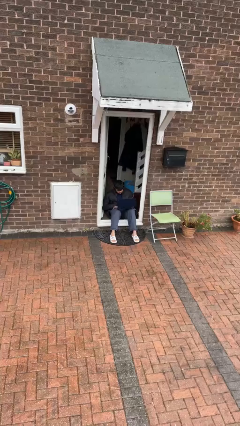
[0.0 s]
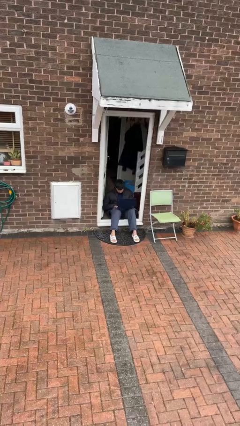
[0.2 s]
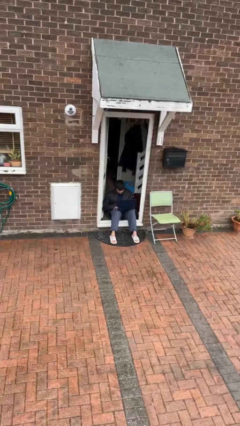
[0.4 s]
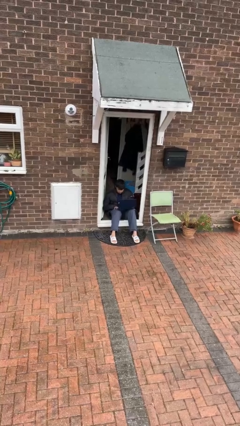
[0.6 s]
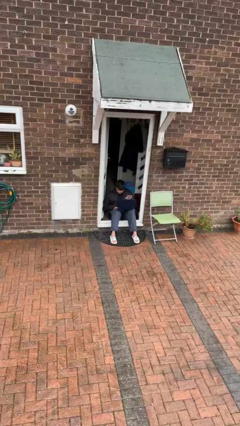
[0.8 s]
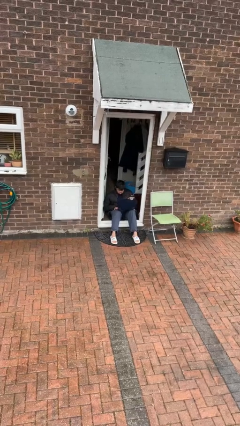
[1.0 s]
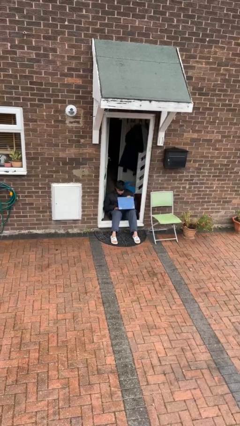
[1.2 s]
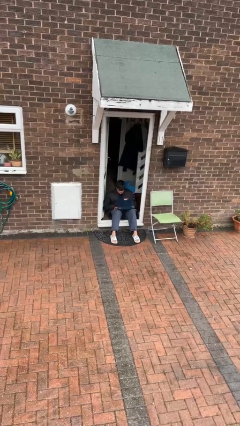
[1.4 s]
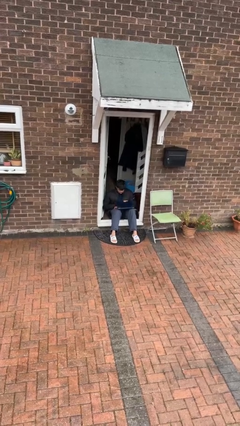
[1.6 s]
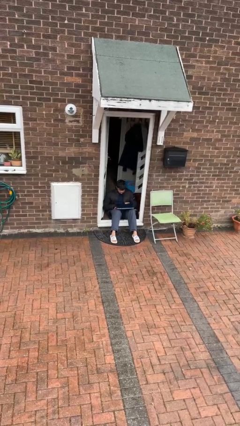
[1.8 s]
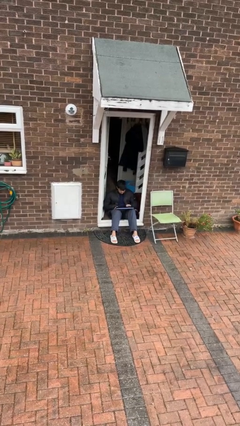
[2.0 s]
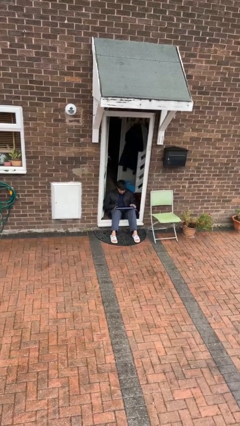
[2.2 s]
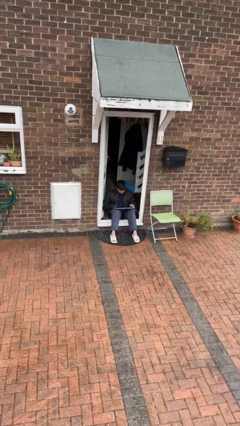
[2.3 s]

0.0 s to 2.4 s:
person closes laptop

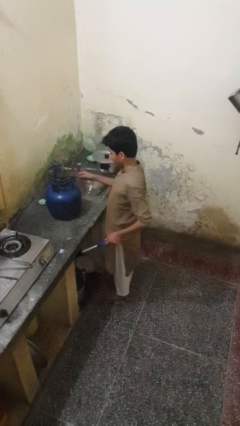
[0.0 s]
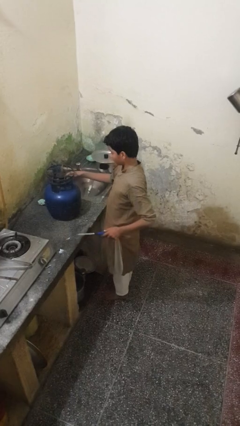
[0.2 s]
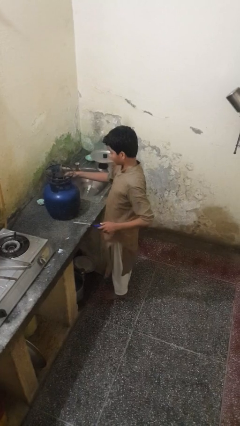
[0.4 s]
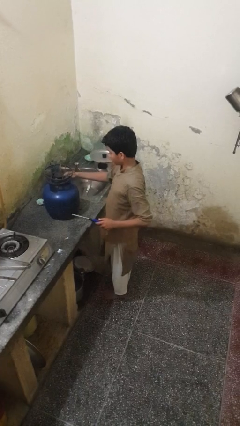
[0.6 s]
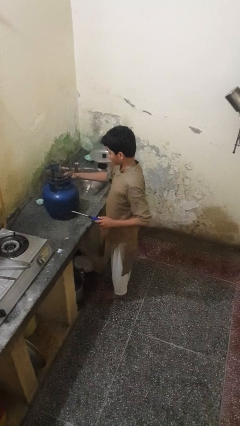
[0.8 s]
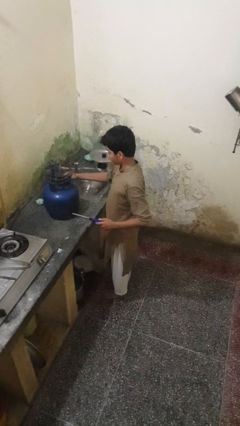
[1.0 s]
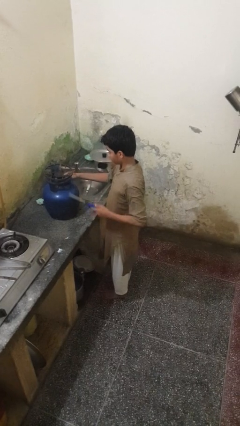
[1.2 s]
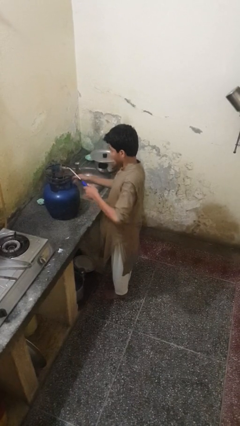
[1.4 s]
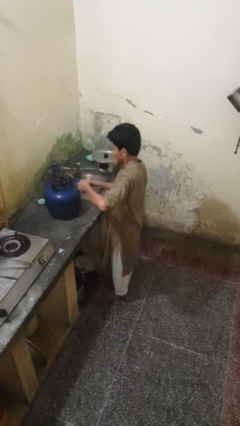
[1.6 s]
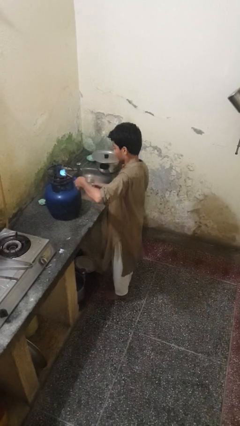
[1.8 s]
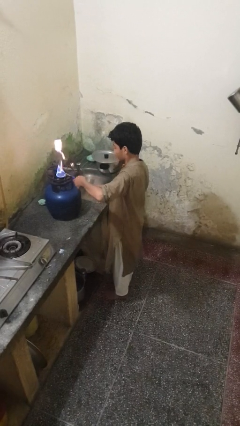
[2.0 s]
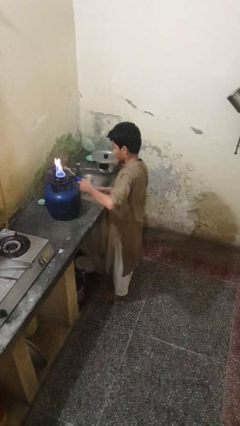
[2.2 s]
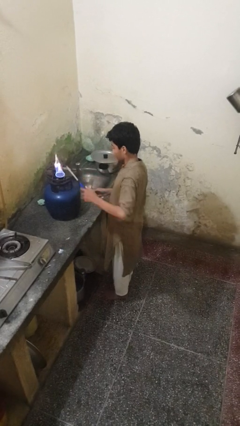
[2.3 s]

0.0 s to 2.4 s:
person turns on stovetop

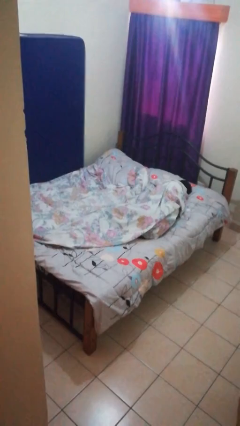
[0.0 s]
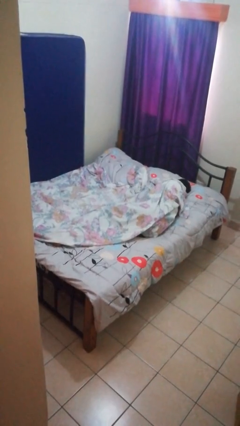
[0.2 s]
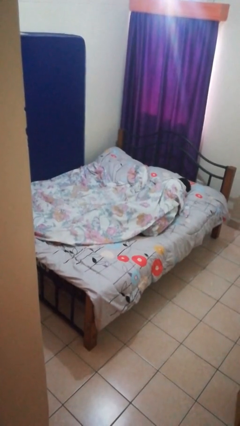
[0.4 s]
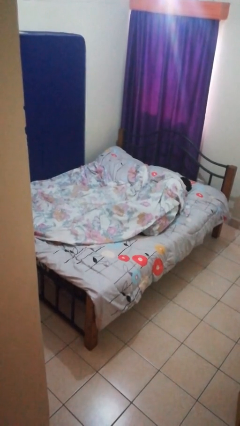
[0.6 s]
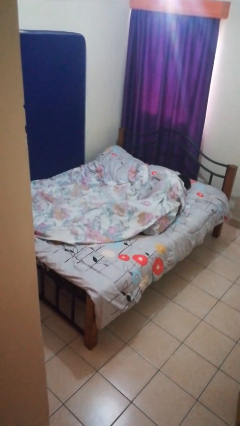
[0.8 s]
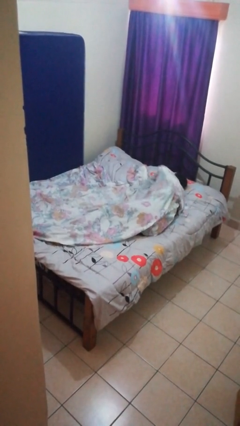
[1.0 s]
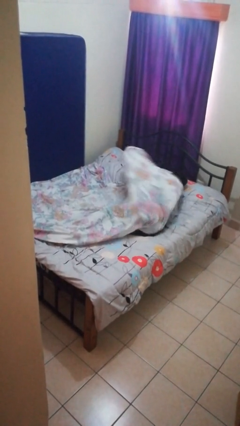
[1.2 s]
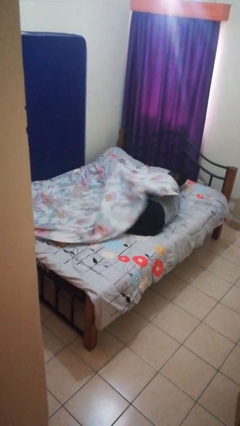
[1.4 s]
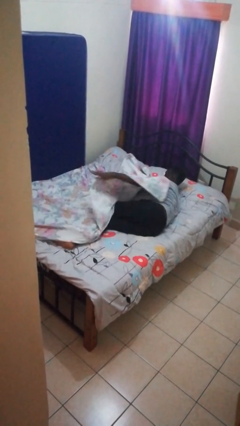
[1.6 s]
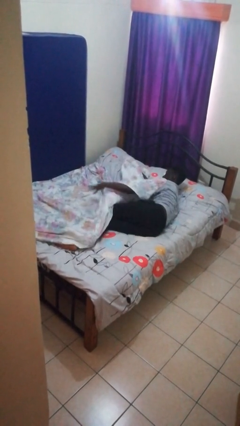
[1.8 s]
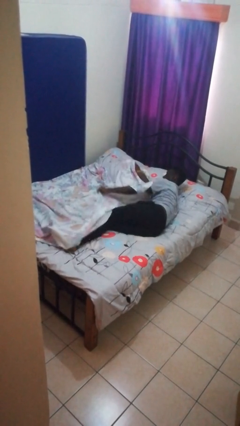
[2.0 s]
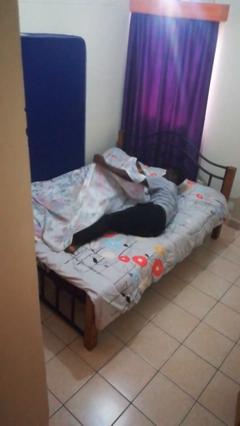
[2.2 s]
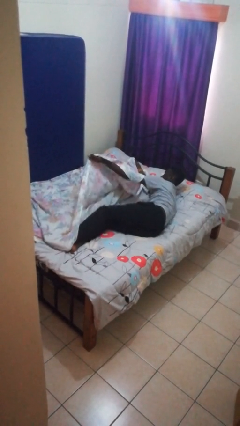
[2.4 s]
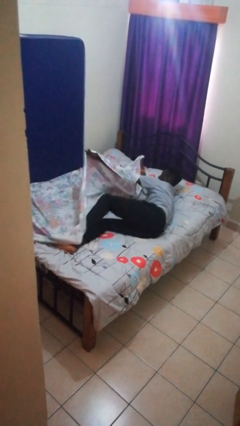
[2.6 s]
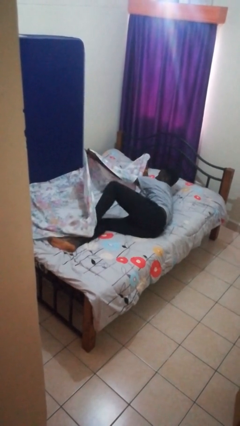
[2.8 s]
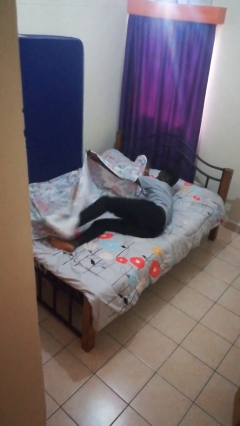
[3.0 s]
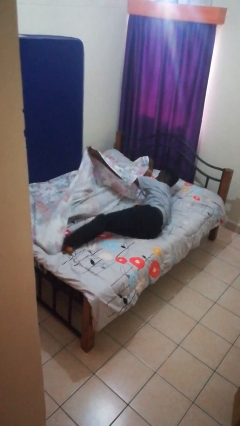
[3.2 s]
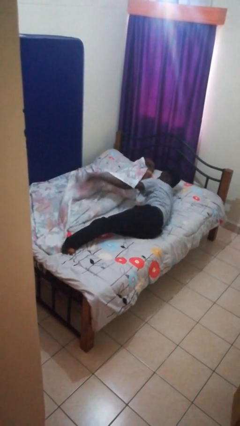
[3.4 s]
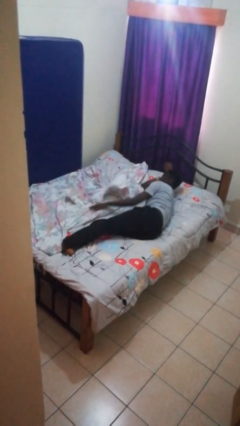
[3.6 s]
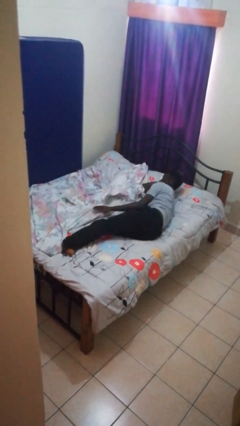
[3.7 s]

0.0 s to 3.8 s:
person uncovers with bedsheets

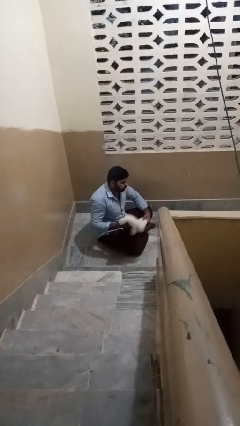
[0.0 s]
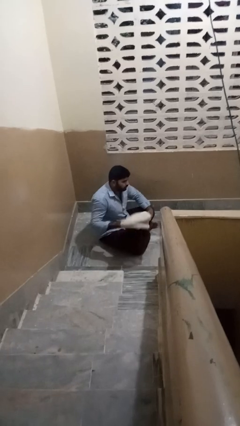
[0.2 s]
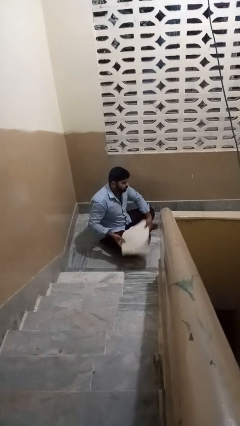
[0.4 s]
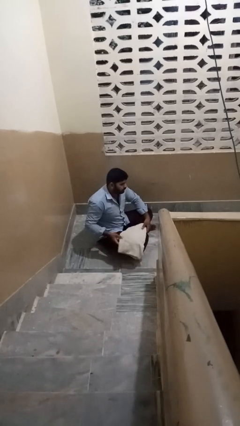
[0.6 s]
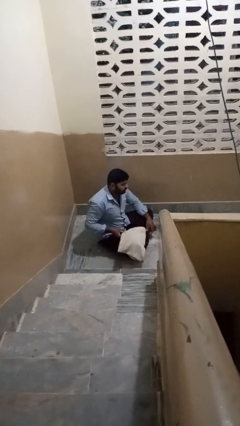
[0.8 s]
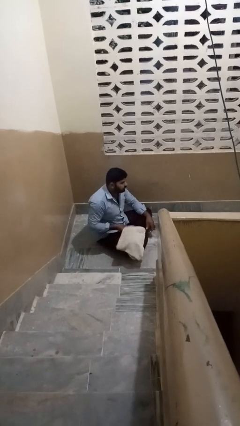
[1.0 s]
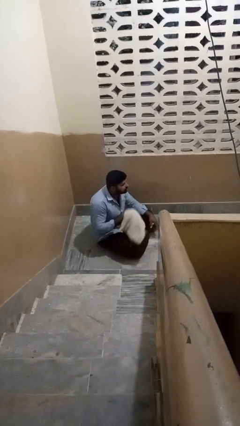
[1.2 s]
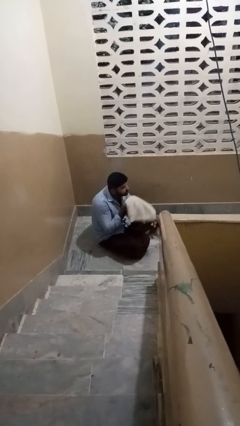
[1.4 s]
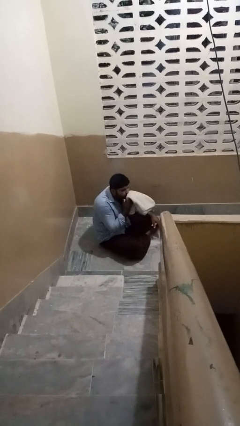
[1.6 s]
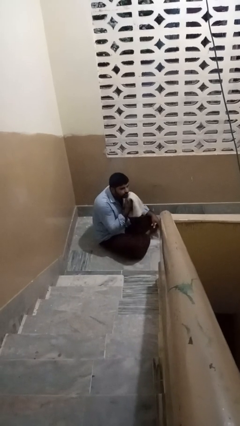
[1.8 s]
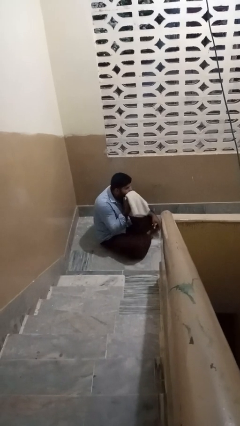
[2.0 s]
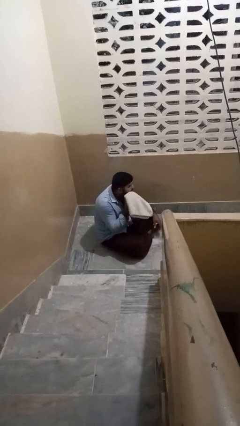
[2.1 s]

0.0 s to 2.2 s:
person wipes mouth with napkin

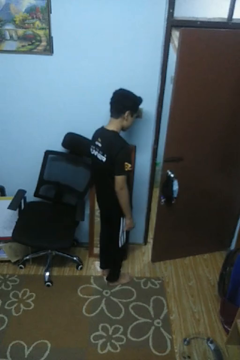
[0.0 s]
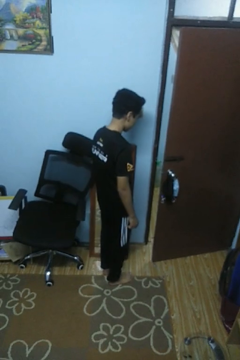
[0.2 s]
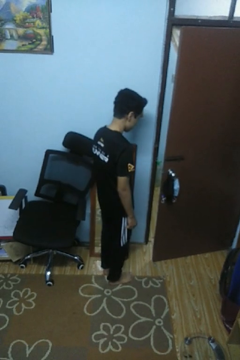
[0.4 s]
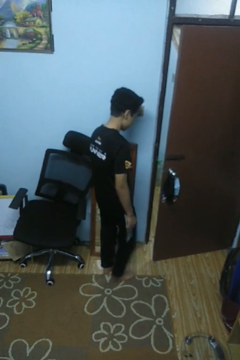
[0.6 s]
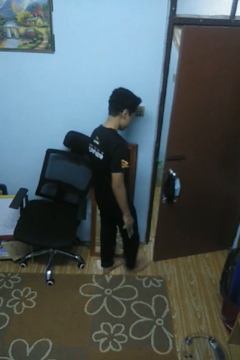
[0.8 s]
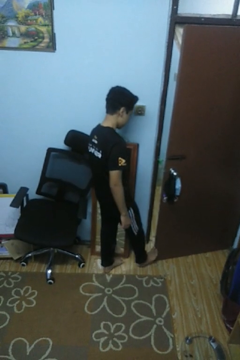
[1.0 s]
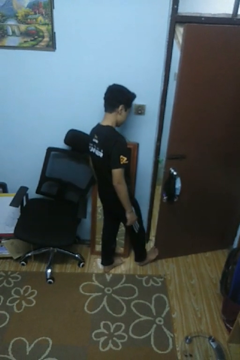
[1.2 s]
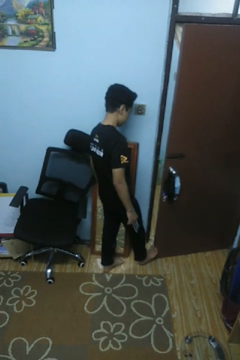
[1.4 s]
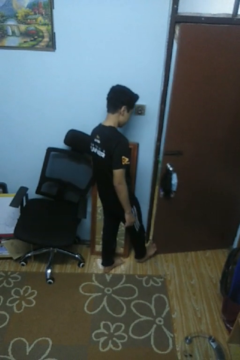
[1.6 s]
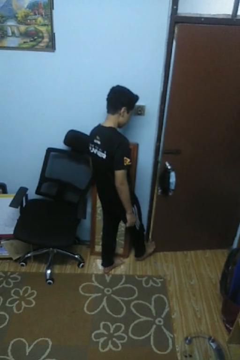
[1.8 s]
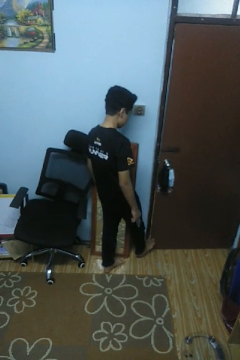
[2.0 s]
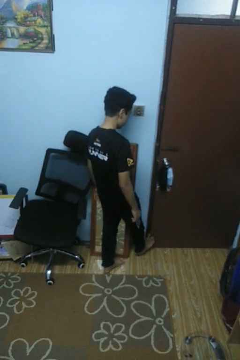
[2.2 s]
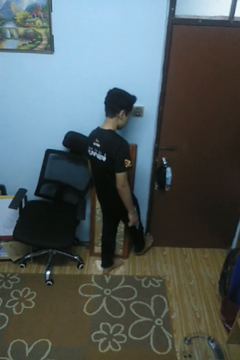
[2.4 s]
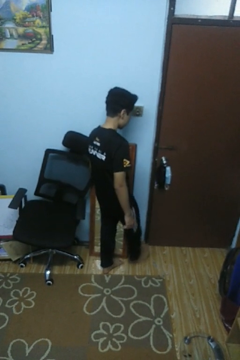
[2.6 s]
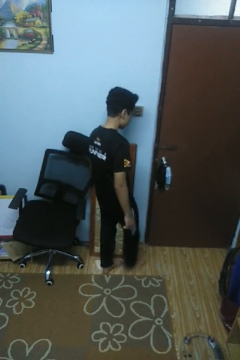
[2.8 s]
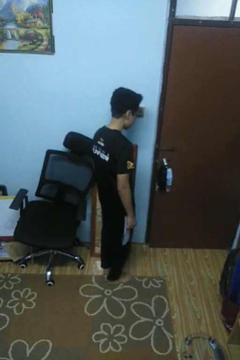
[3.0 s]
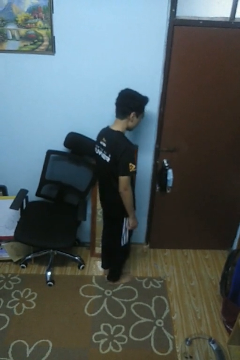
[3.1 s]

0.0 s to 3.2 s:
person closes door with foot

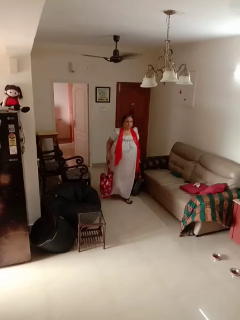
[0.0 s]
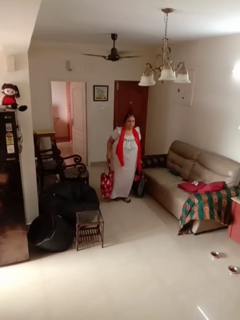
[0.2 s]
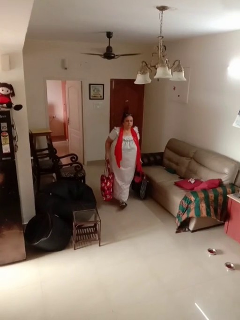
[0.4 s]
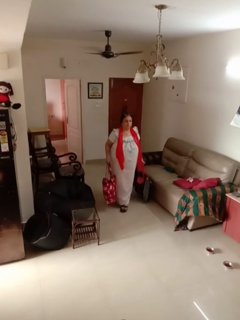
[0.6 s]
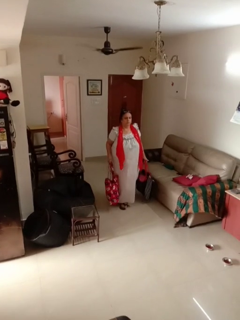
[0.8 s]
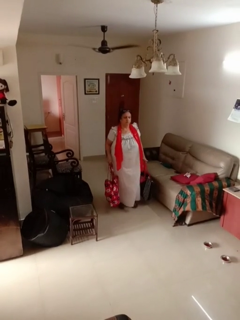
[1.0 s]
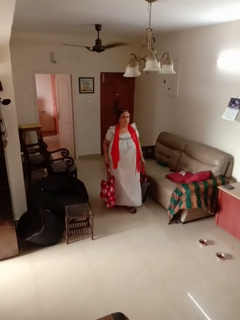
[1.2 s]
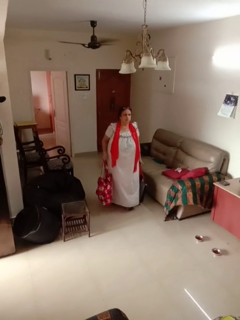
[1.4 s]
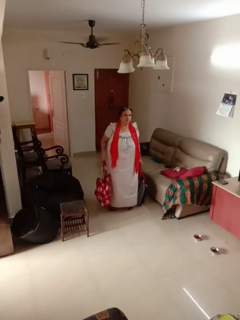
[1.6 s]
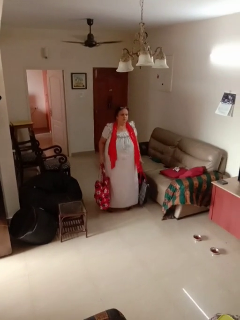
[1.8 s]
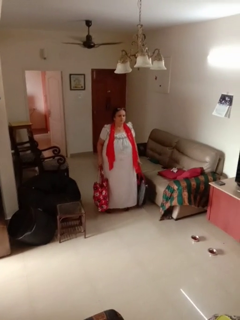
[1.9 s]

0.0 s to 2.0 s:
person carries groceries

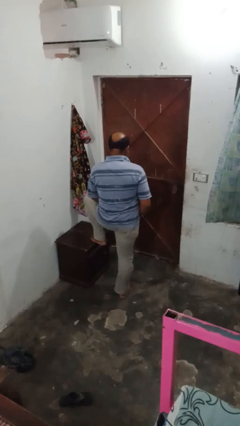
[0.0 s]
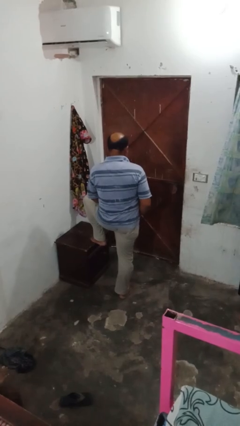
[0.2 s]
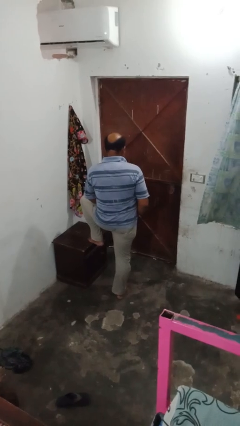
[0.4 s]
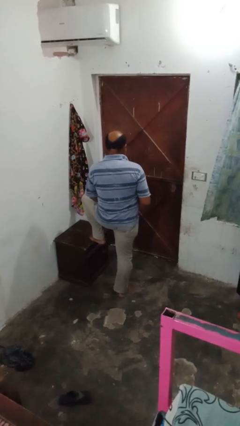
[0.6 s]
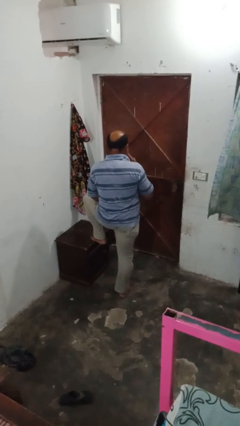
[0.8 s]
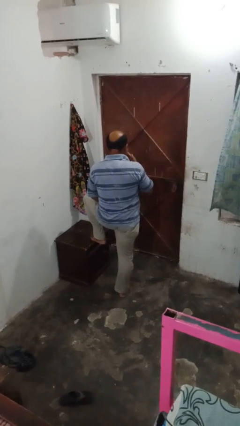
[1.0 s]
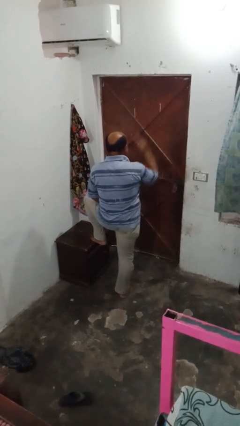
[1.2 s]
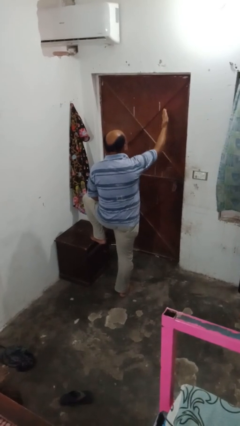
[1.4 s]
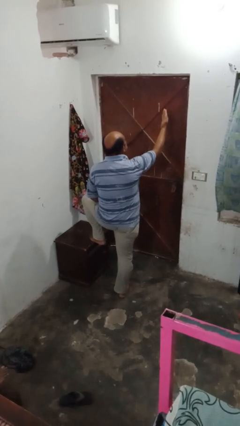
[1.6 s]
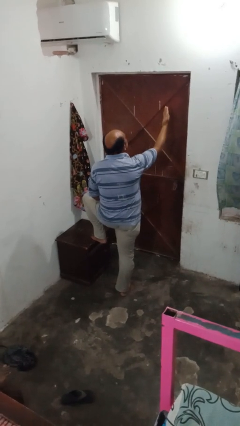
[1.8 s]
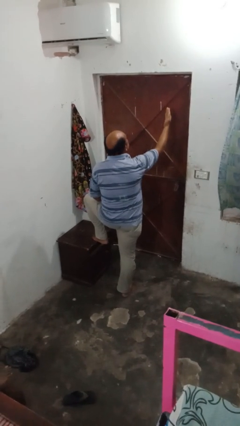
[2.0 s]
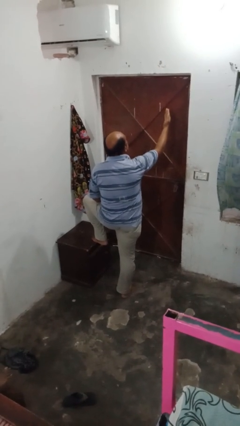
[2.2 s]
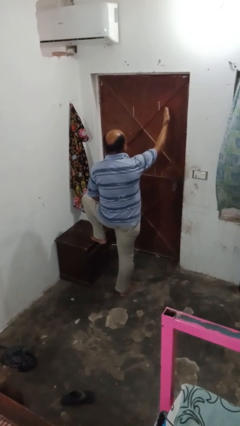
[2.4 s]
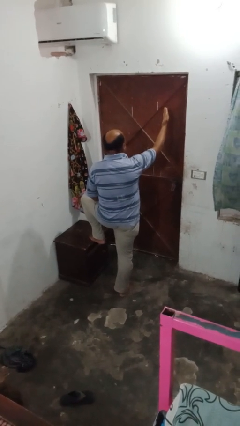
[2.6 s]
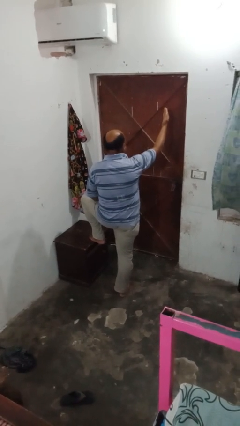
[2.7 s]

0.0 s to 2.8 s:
person gestures blow kiss
